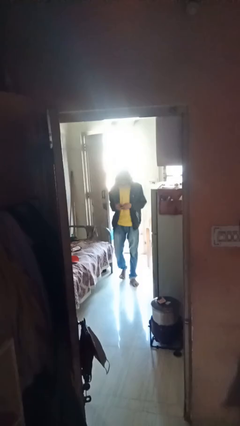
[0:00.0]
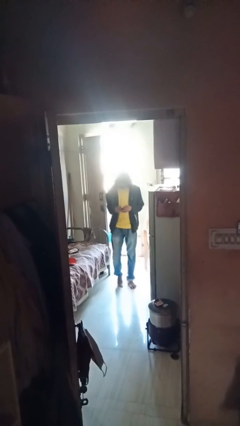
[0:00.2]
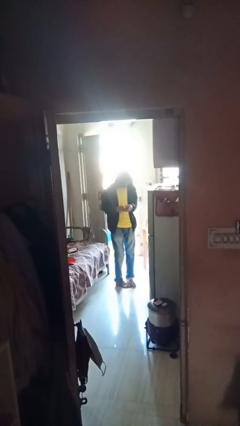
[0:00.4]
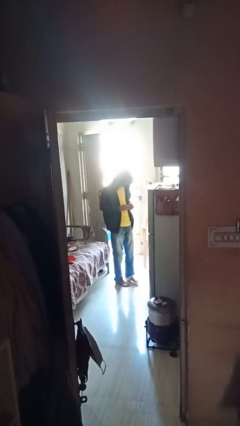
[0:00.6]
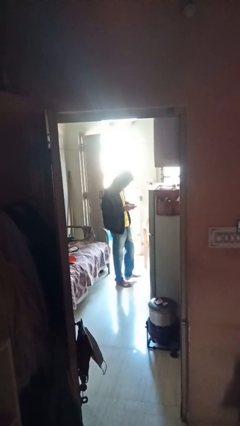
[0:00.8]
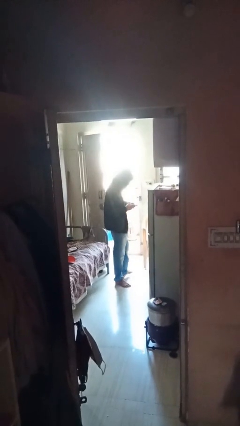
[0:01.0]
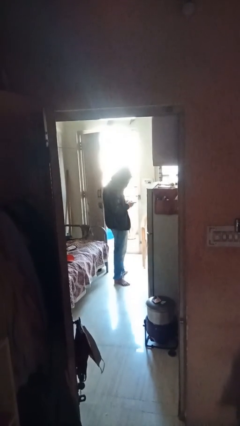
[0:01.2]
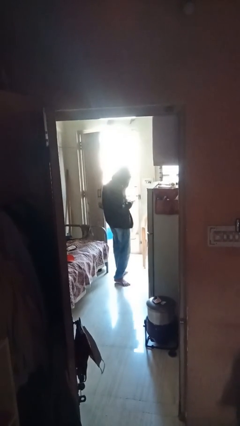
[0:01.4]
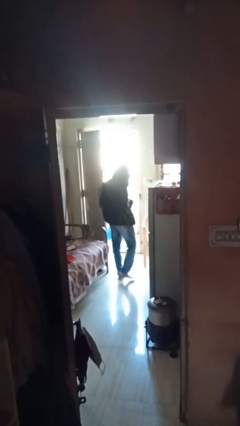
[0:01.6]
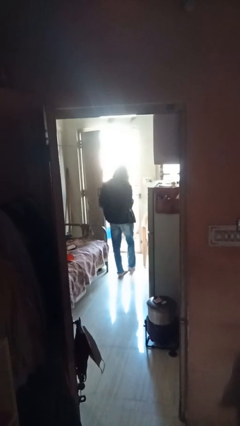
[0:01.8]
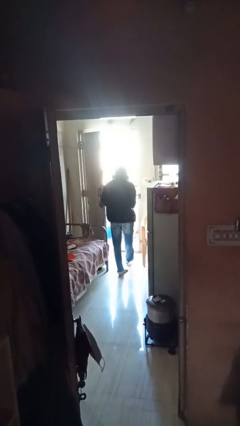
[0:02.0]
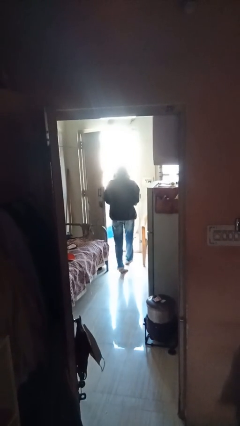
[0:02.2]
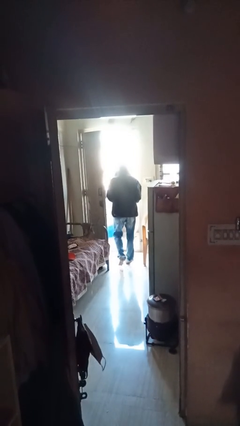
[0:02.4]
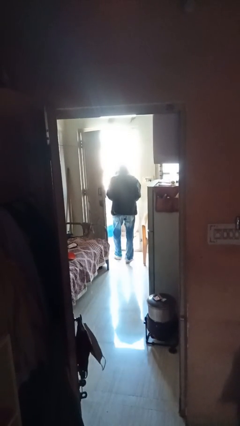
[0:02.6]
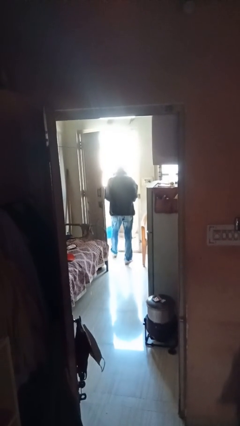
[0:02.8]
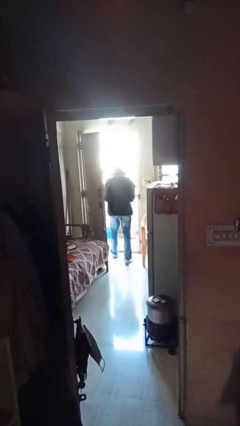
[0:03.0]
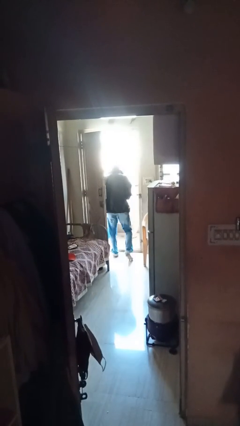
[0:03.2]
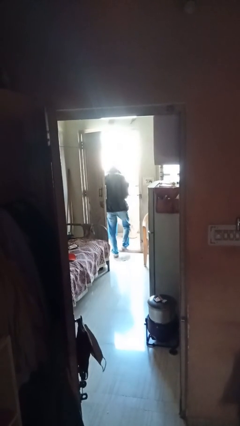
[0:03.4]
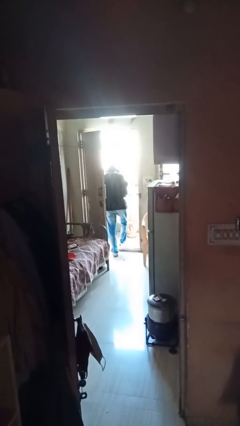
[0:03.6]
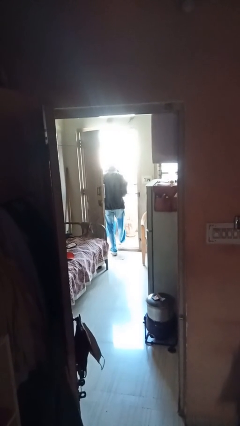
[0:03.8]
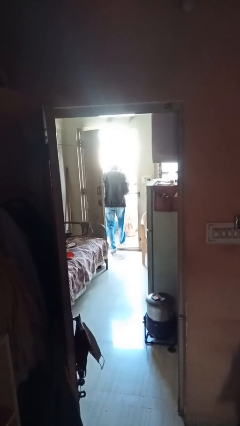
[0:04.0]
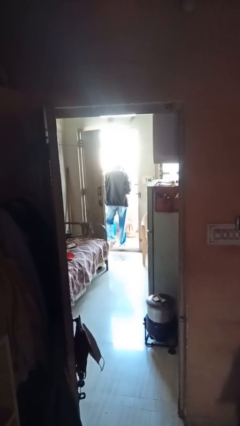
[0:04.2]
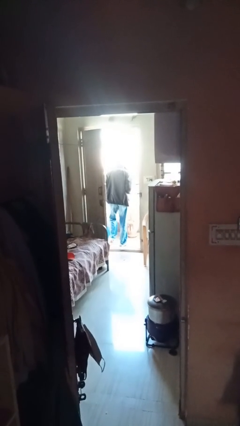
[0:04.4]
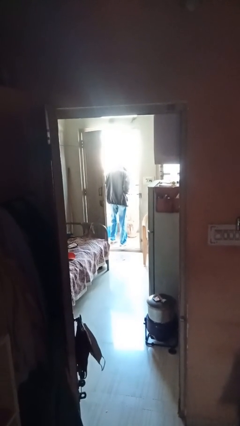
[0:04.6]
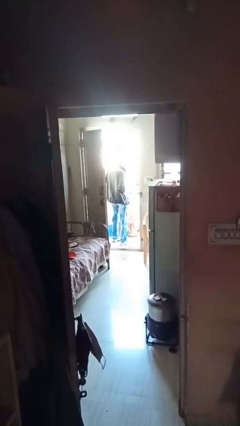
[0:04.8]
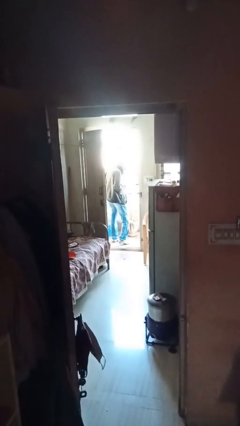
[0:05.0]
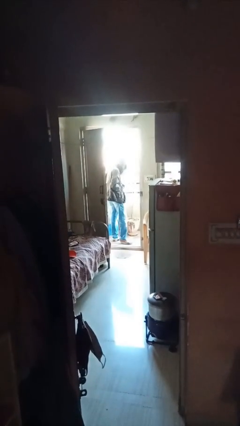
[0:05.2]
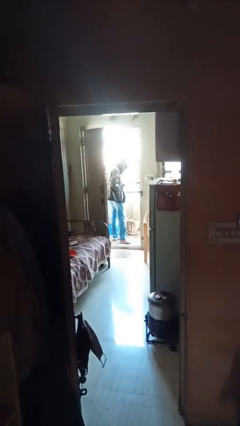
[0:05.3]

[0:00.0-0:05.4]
person exits scene through structure

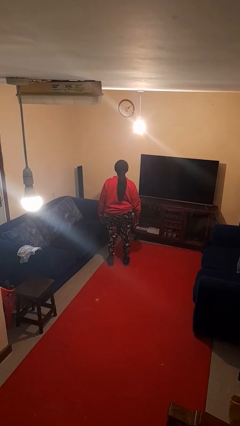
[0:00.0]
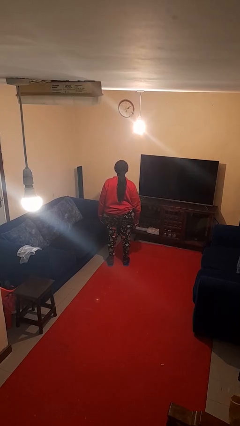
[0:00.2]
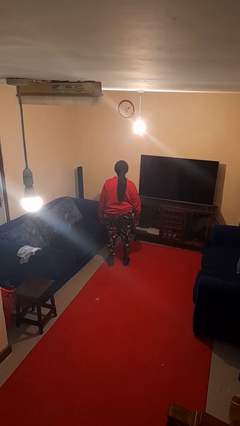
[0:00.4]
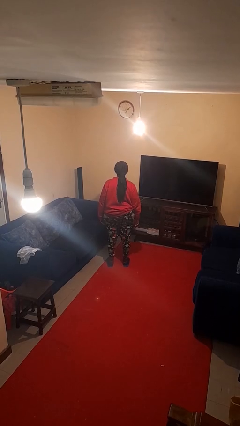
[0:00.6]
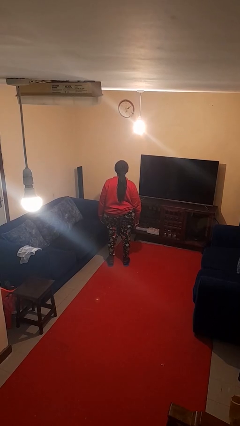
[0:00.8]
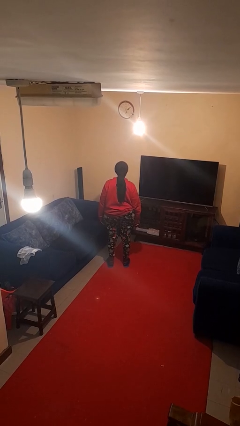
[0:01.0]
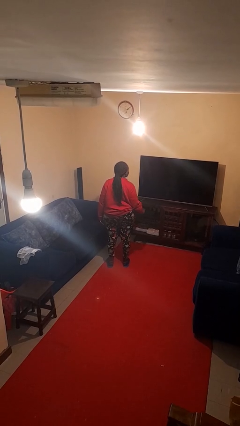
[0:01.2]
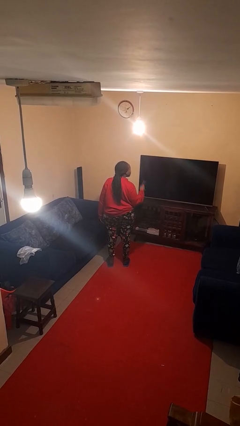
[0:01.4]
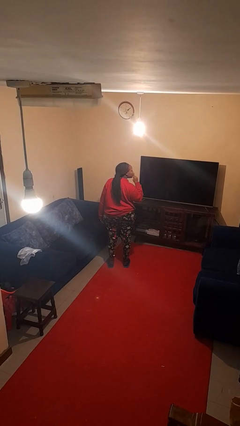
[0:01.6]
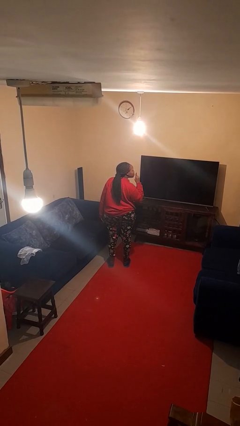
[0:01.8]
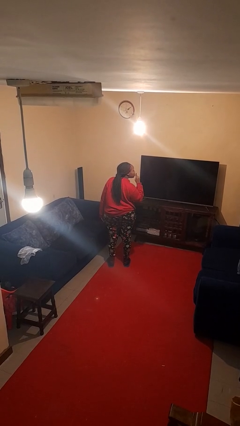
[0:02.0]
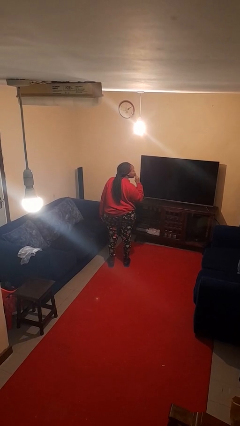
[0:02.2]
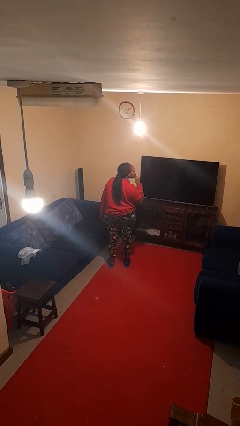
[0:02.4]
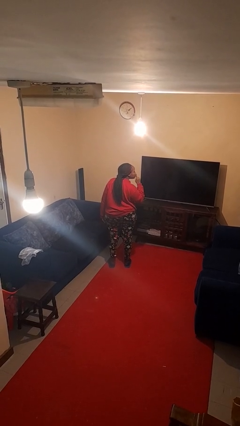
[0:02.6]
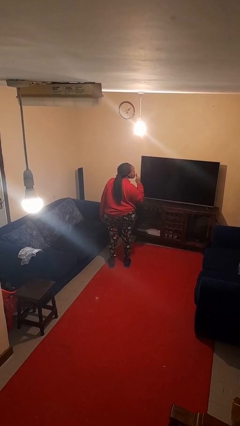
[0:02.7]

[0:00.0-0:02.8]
person gestures be quiet

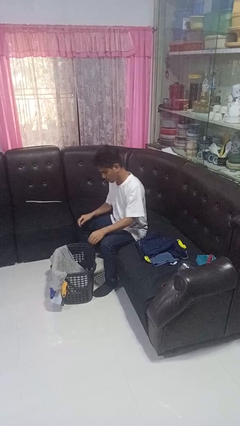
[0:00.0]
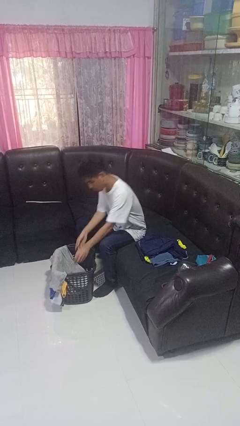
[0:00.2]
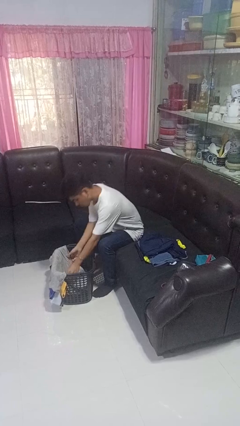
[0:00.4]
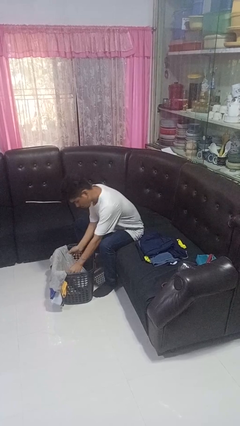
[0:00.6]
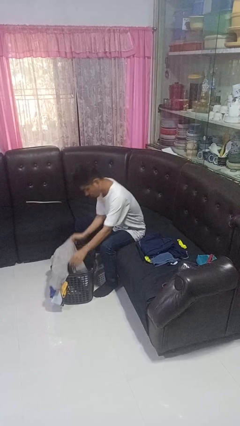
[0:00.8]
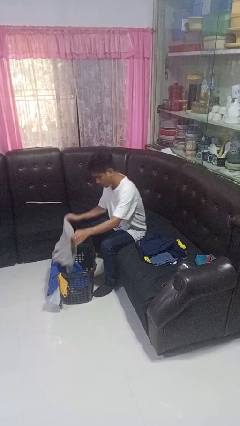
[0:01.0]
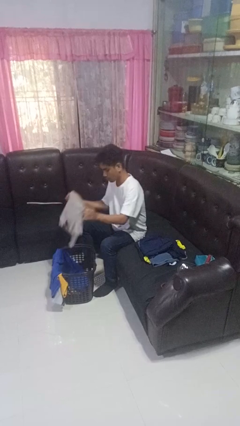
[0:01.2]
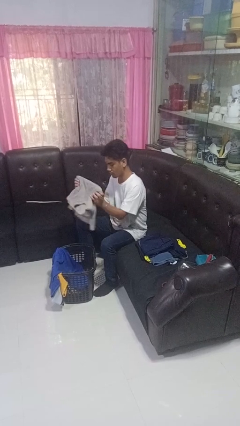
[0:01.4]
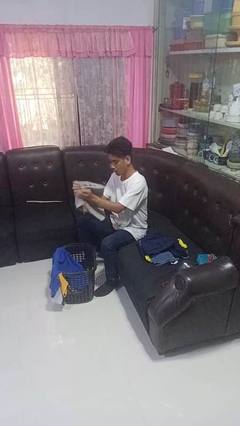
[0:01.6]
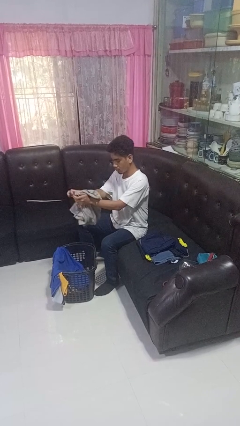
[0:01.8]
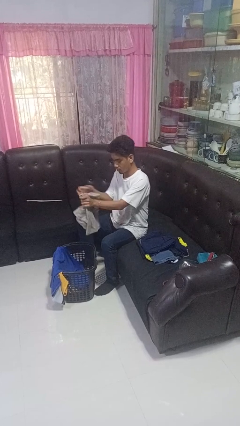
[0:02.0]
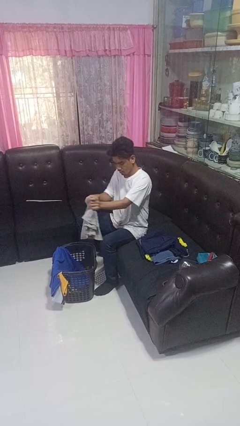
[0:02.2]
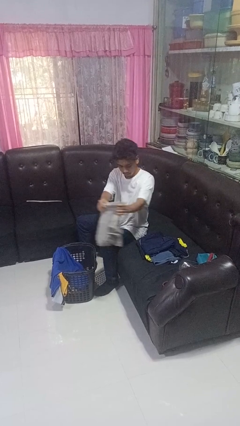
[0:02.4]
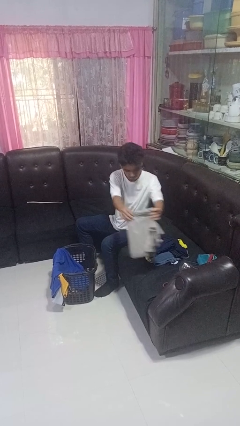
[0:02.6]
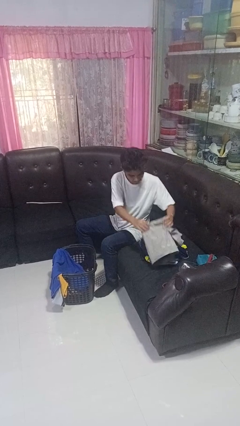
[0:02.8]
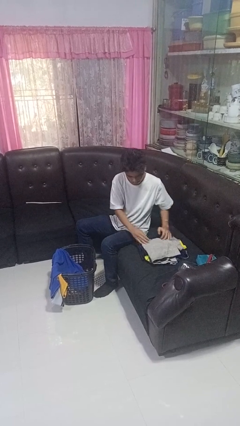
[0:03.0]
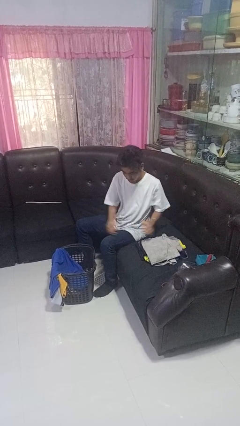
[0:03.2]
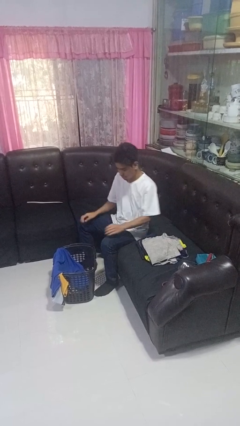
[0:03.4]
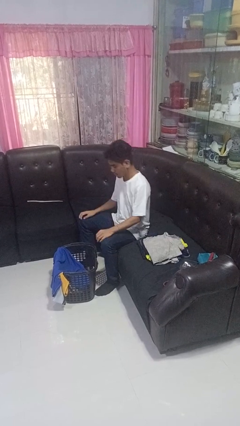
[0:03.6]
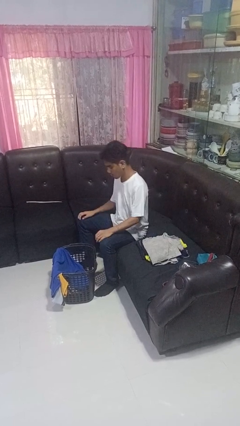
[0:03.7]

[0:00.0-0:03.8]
person folds shirt

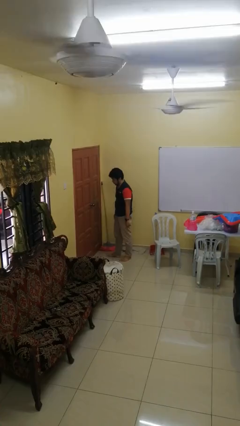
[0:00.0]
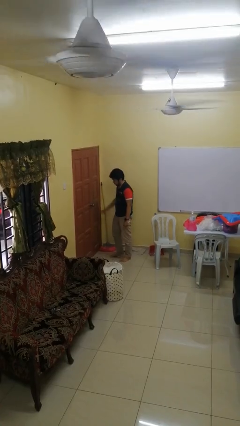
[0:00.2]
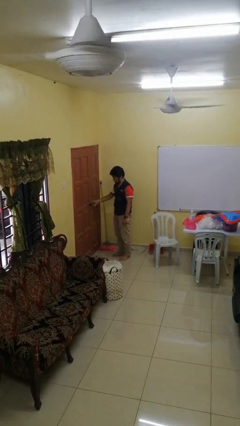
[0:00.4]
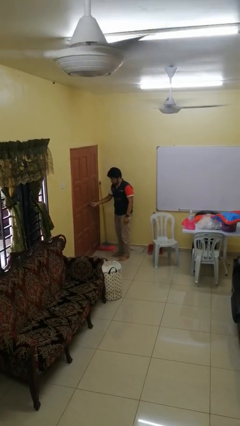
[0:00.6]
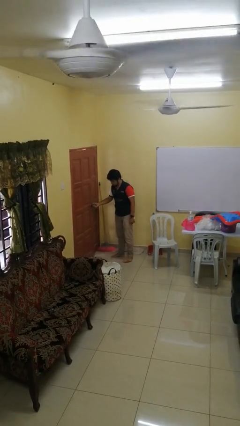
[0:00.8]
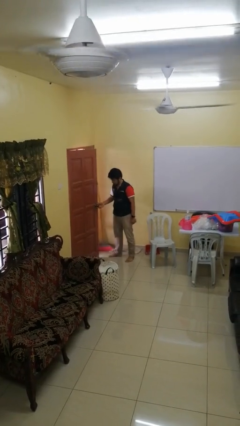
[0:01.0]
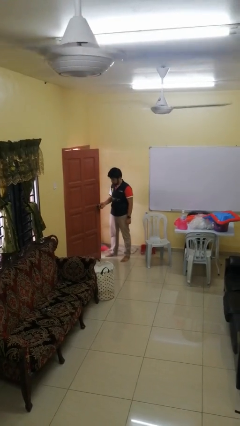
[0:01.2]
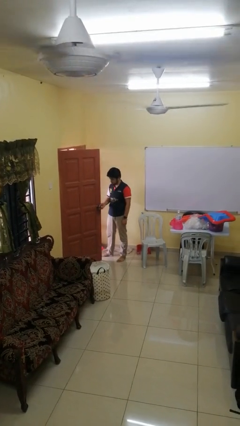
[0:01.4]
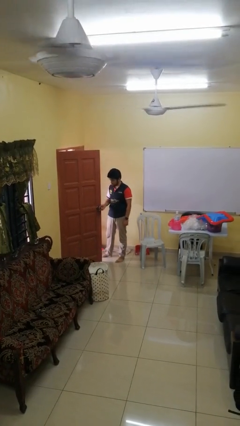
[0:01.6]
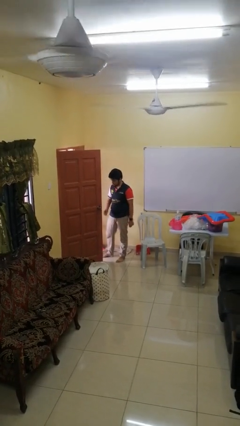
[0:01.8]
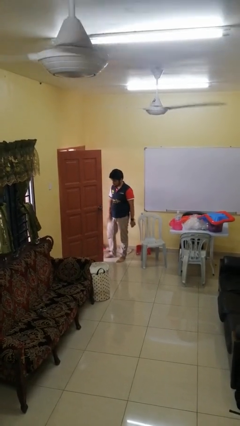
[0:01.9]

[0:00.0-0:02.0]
person opens facility door

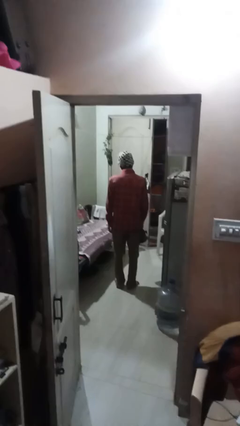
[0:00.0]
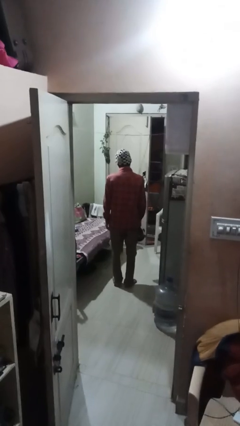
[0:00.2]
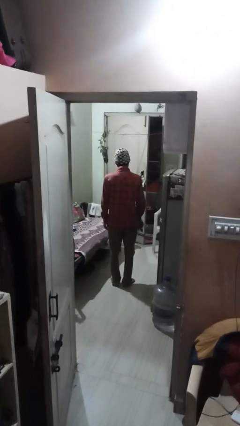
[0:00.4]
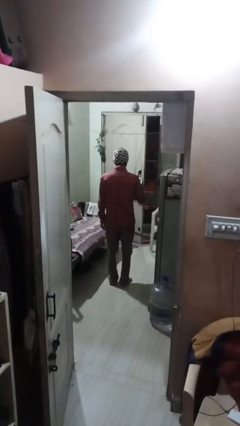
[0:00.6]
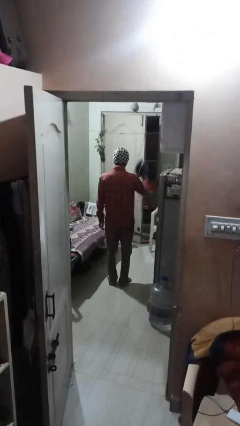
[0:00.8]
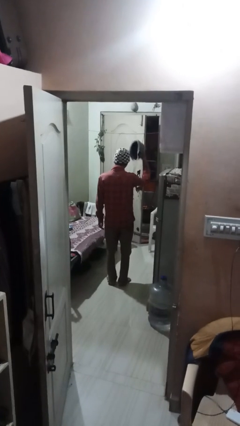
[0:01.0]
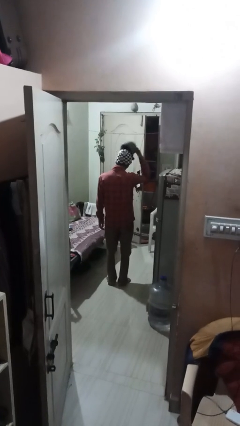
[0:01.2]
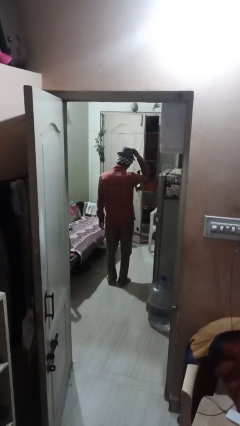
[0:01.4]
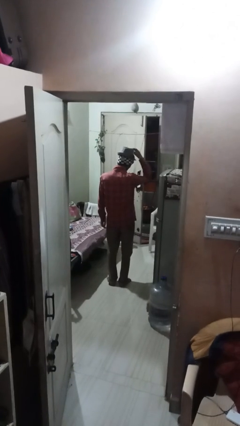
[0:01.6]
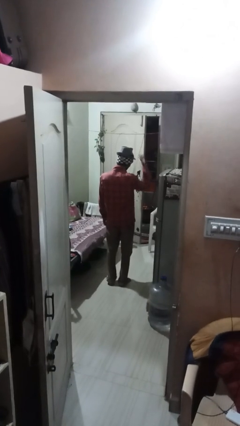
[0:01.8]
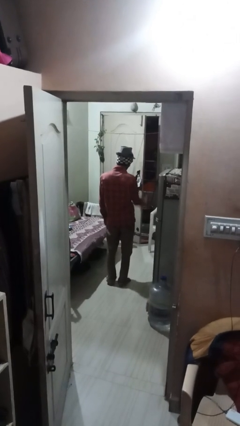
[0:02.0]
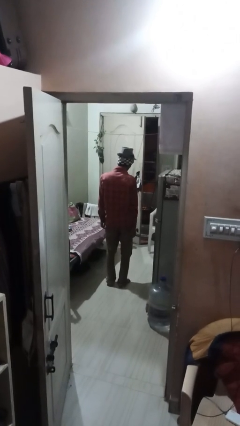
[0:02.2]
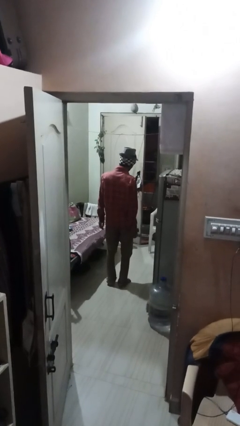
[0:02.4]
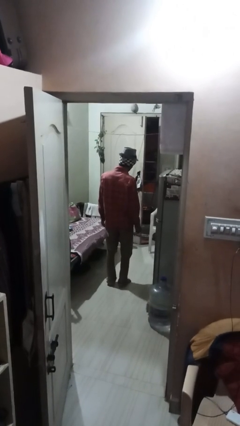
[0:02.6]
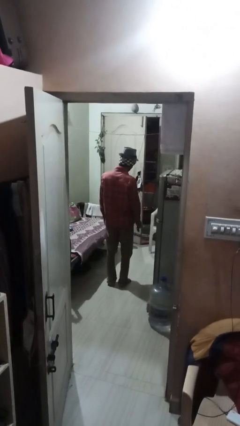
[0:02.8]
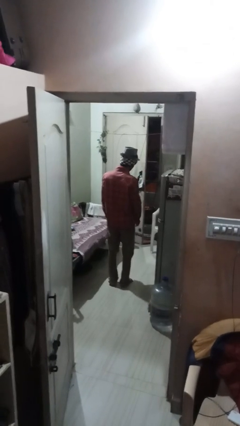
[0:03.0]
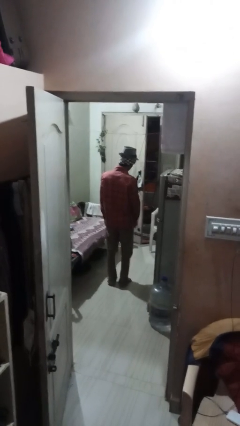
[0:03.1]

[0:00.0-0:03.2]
person puts on hat

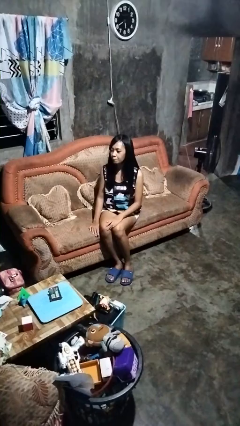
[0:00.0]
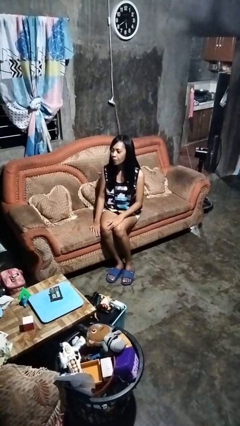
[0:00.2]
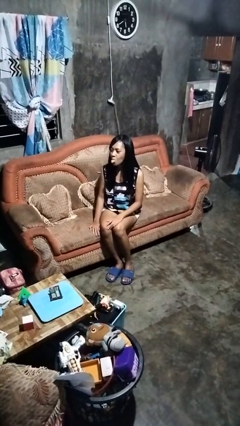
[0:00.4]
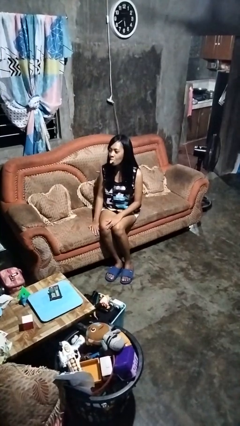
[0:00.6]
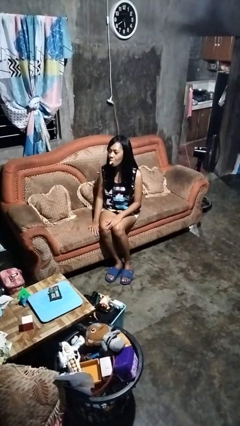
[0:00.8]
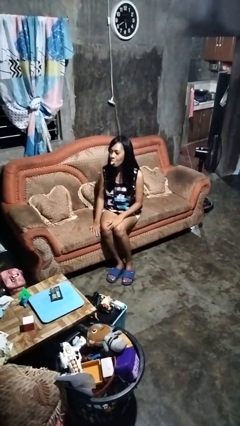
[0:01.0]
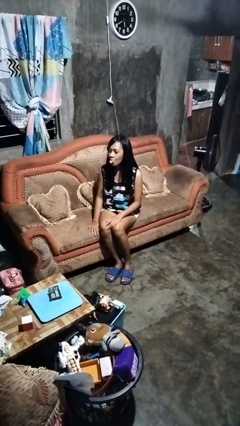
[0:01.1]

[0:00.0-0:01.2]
person sticks out tongue
